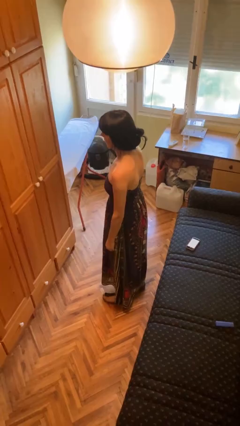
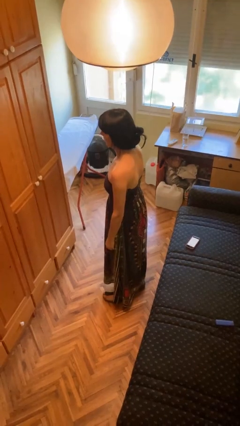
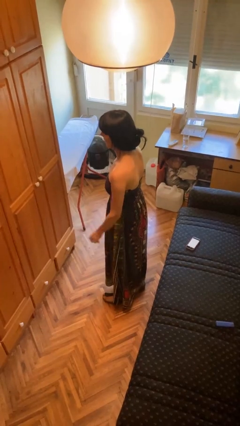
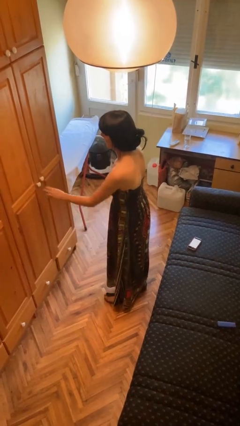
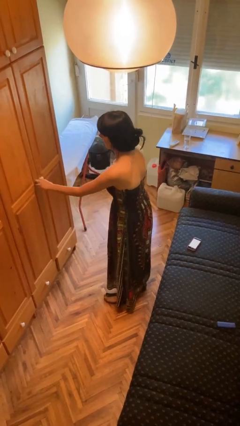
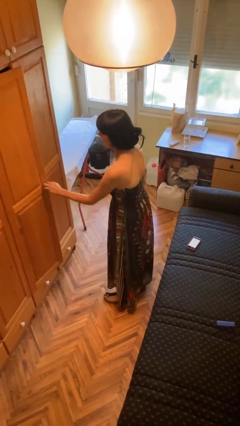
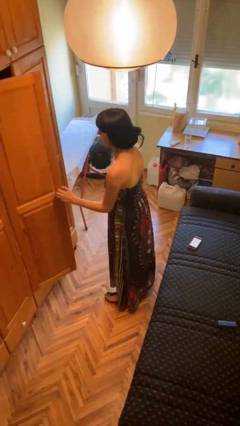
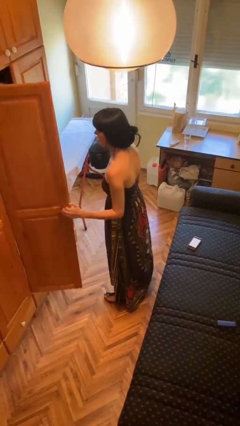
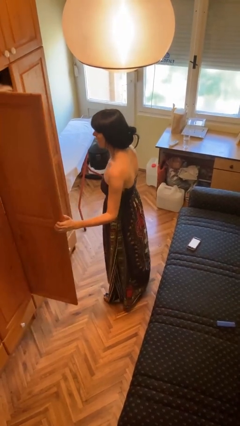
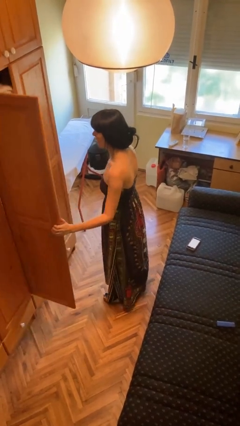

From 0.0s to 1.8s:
person opens closet door

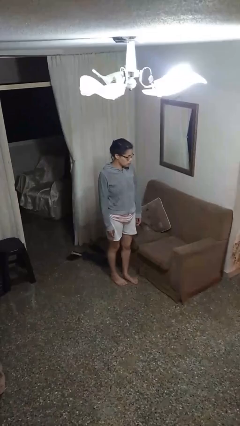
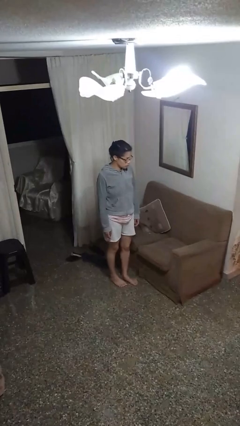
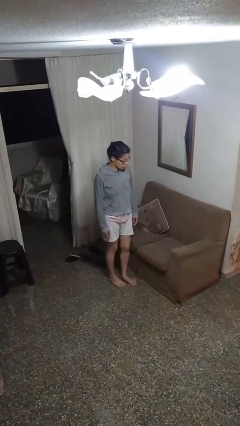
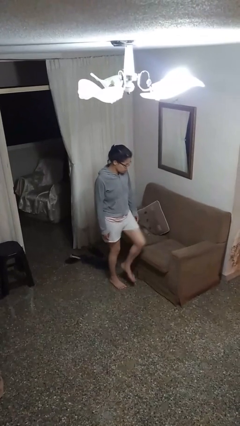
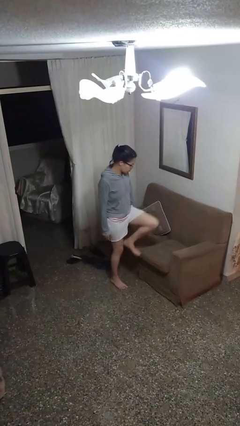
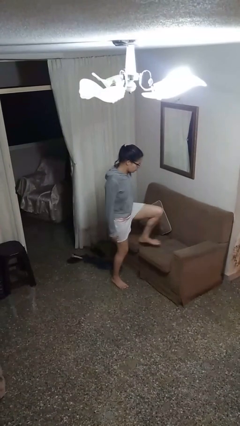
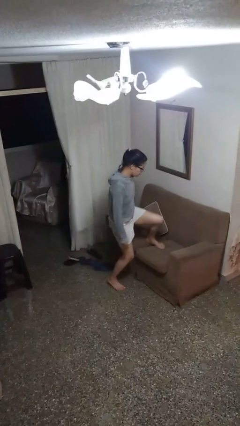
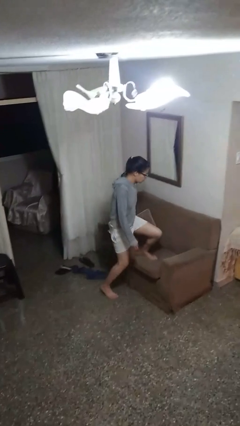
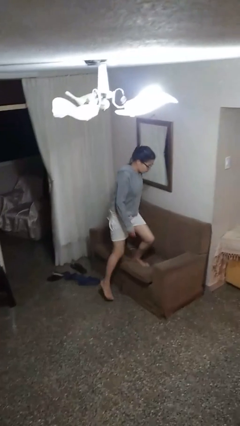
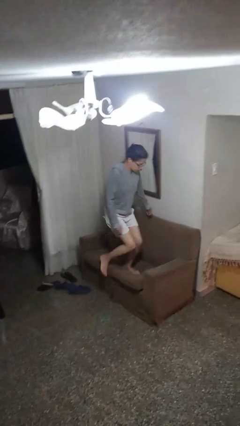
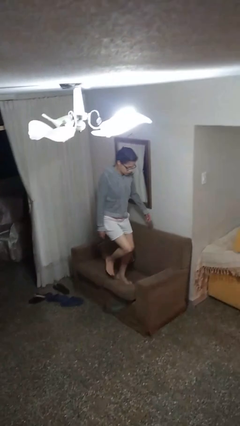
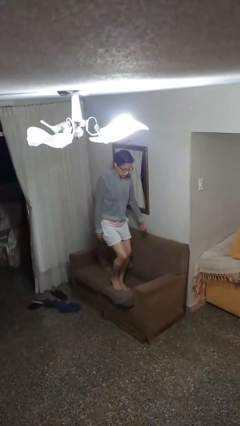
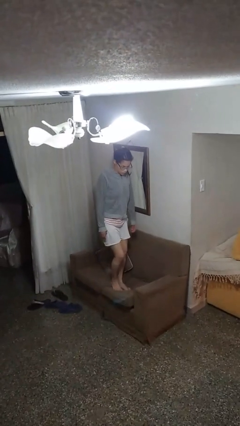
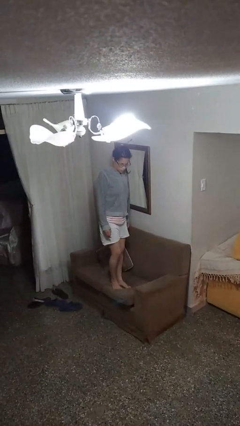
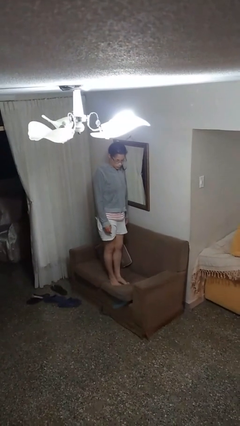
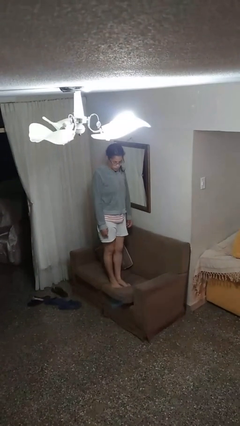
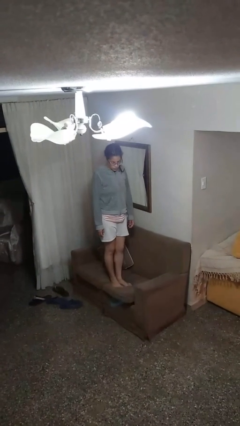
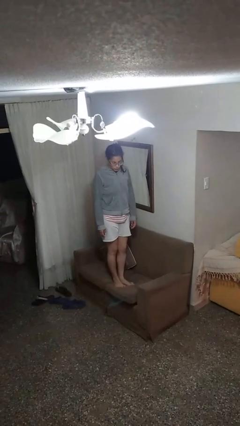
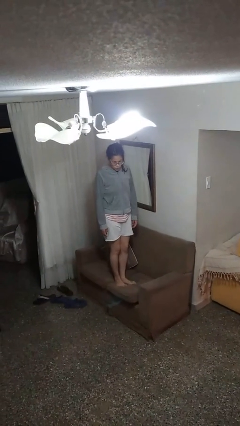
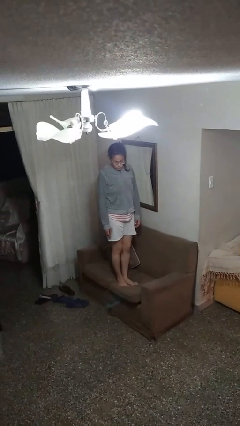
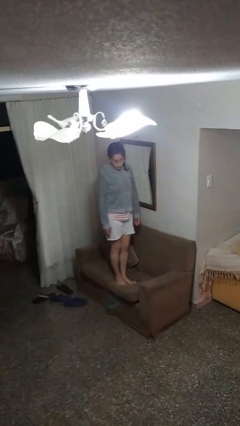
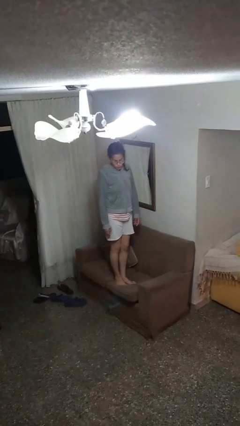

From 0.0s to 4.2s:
person climbs on couch

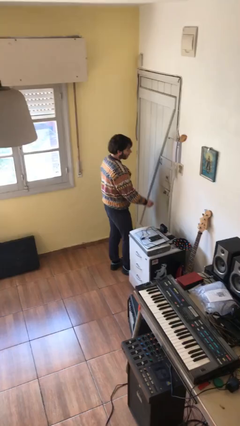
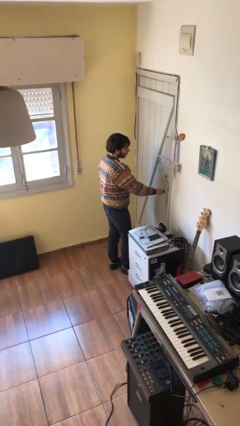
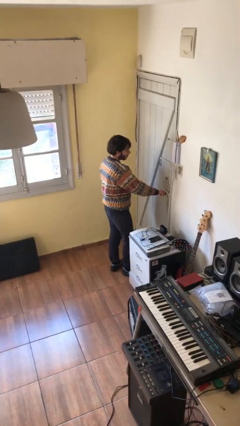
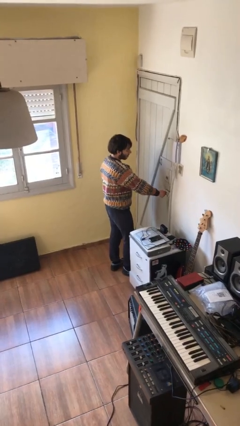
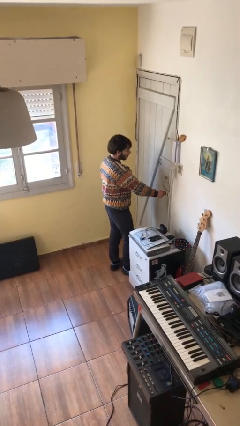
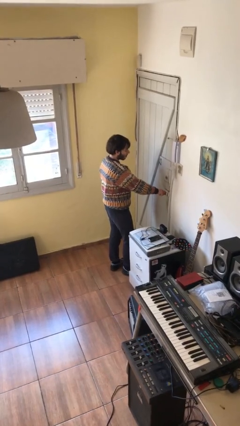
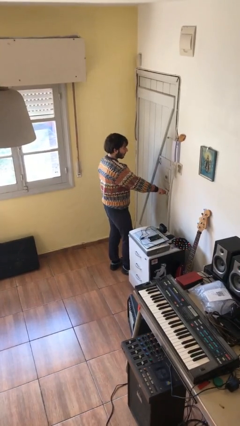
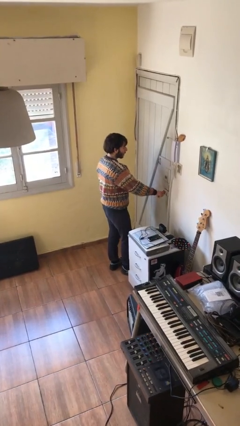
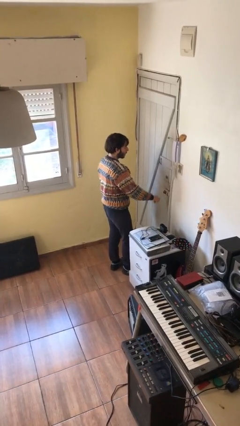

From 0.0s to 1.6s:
person locks door with keys

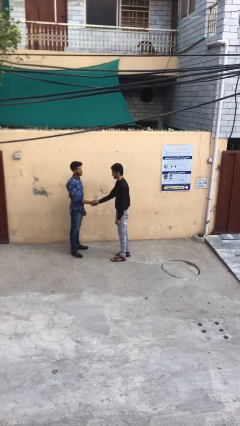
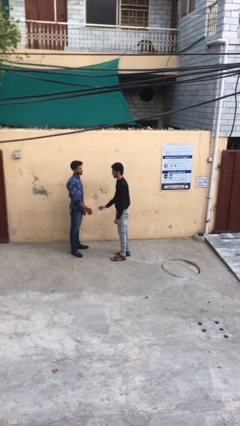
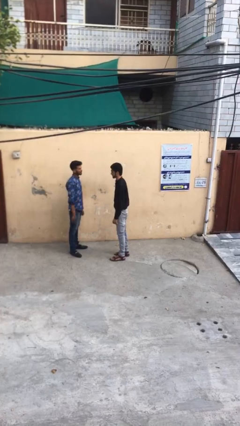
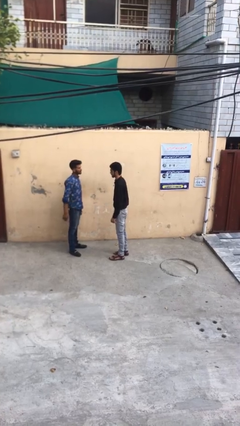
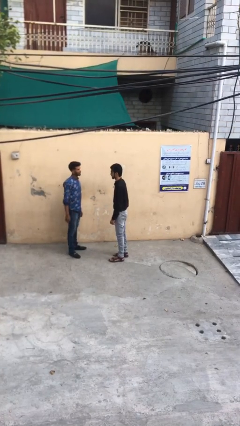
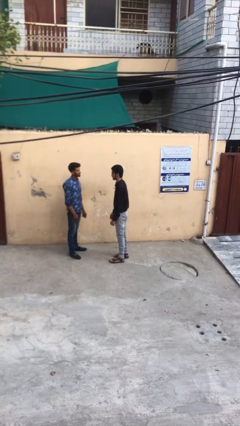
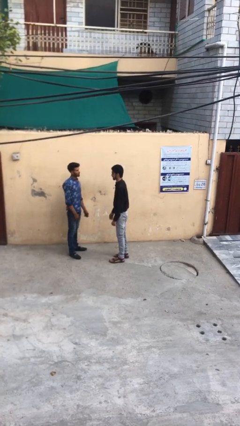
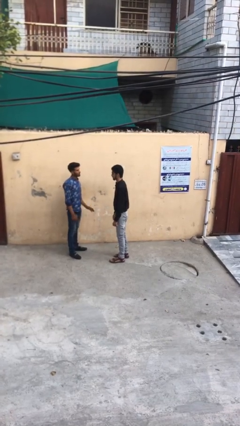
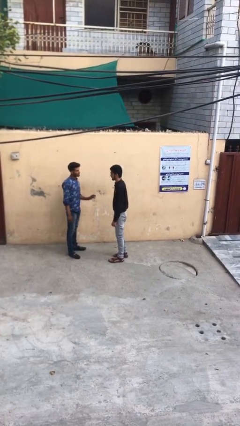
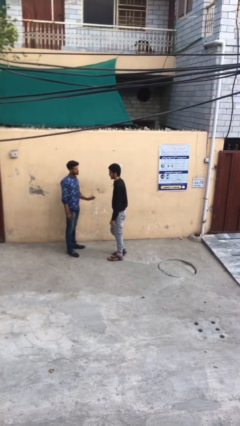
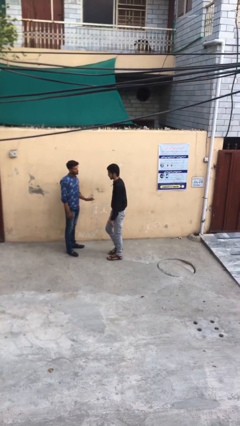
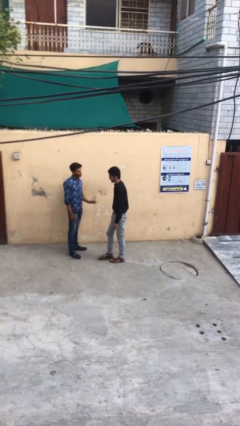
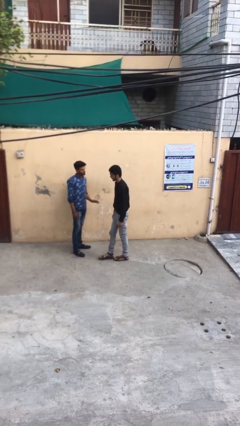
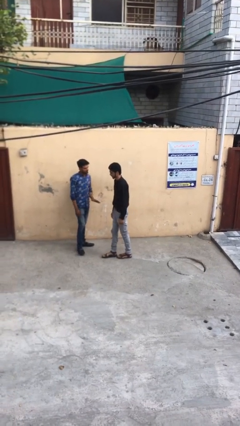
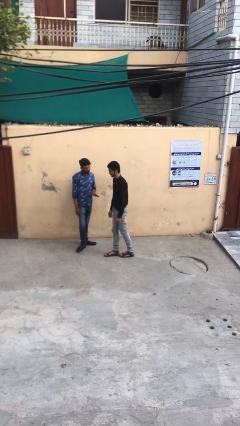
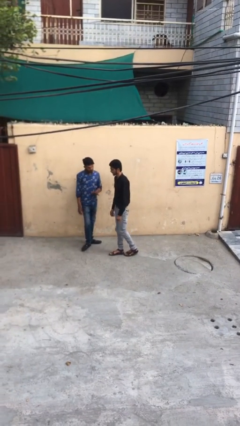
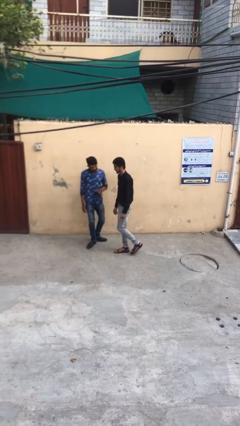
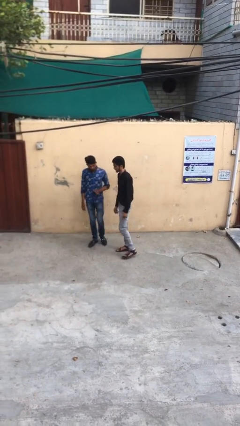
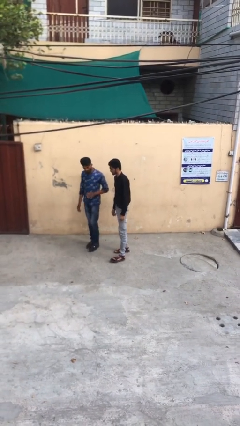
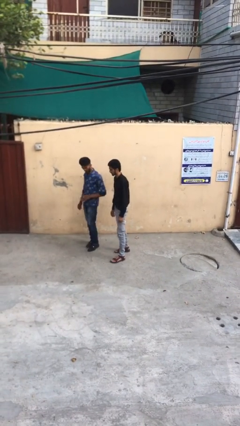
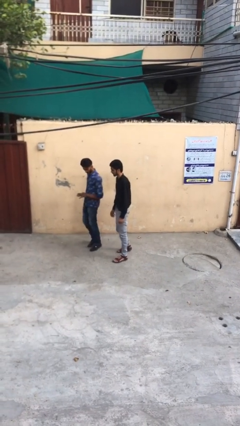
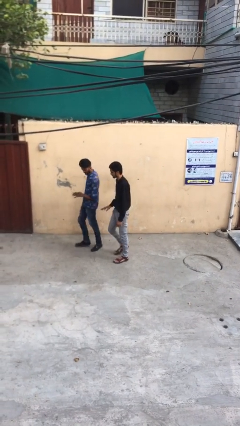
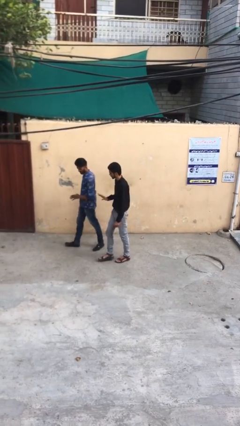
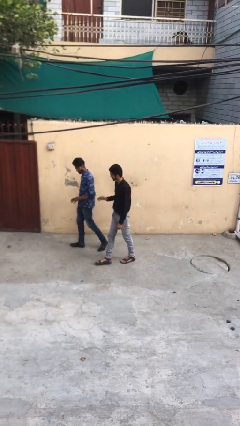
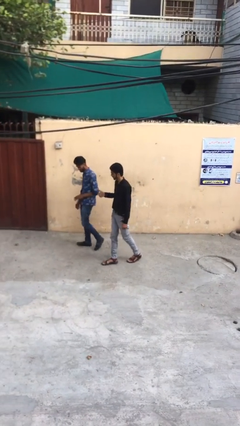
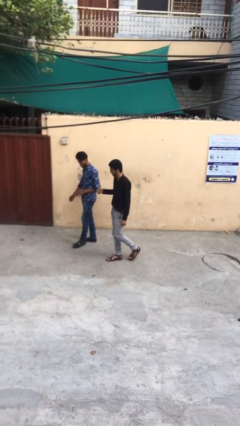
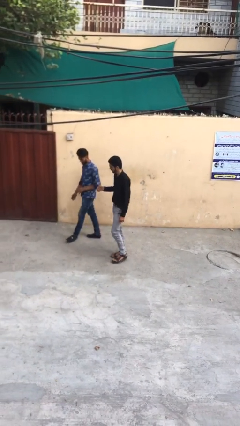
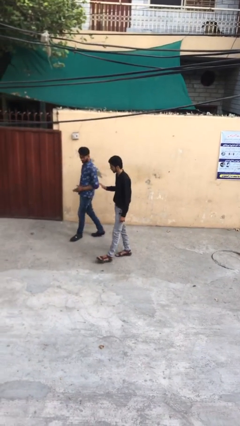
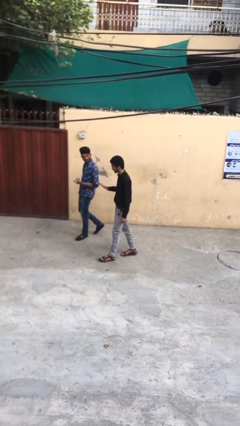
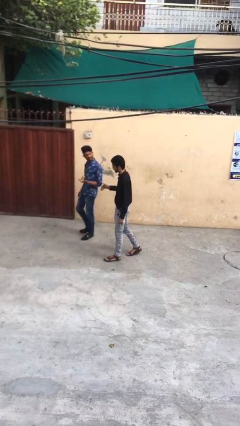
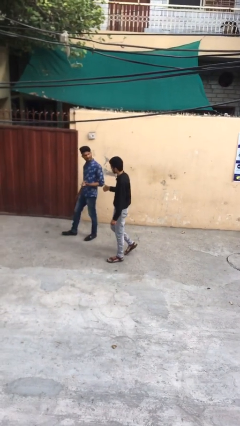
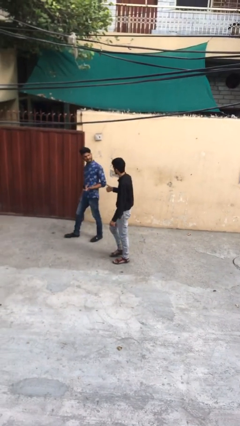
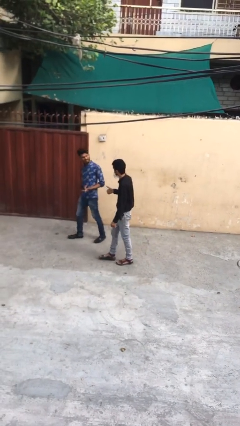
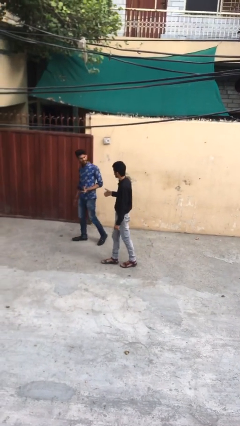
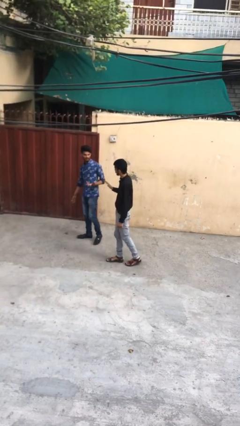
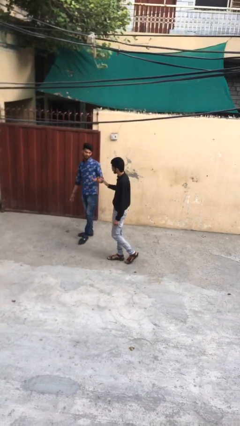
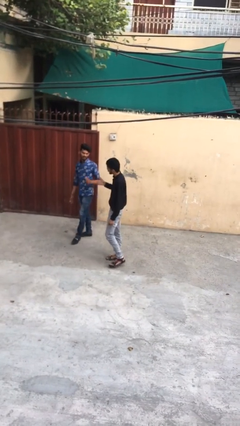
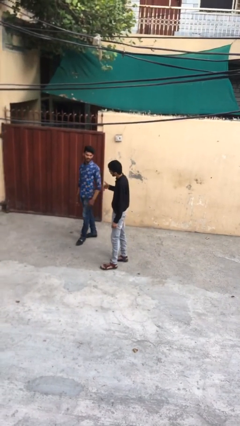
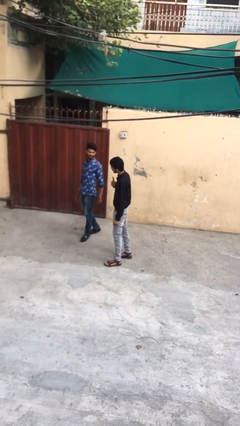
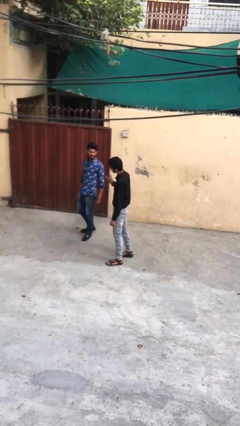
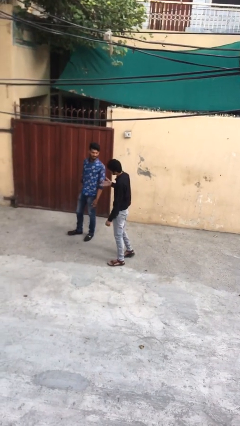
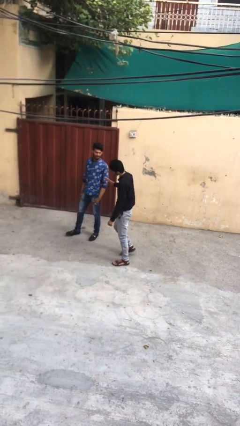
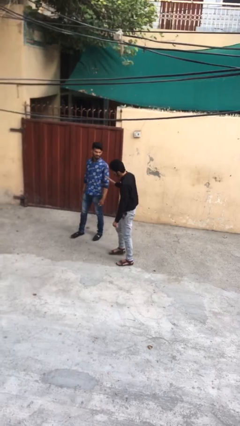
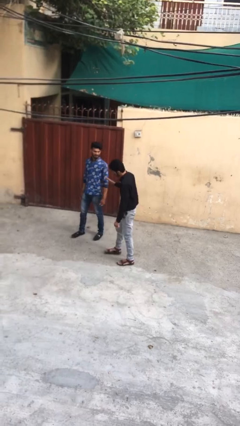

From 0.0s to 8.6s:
person talks to person

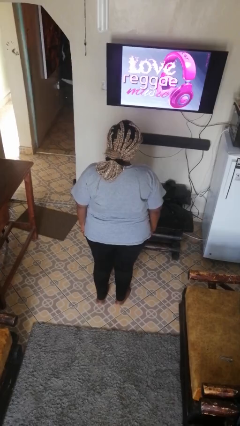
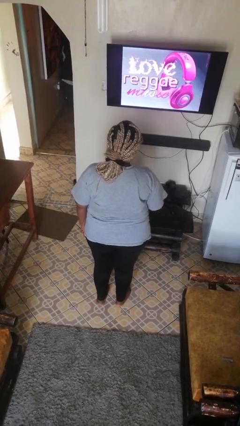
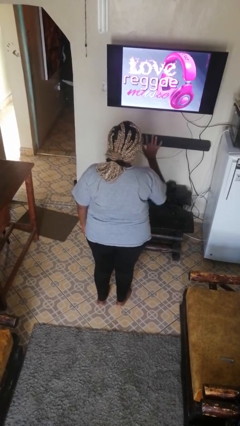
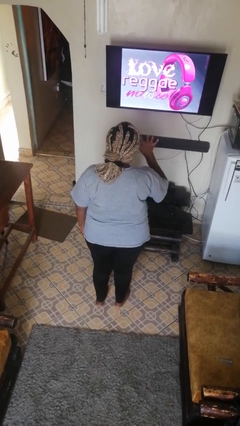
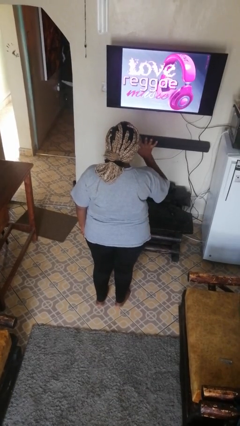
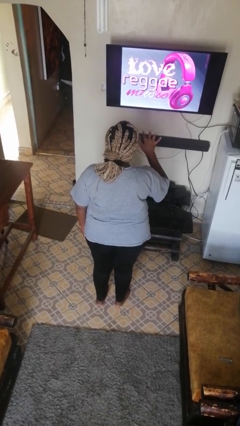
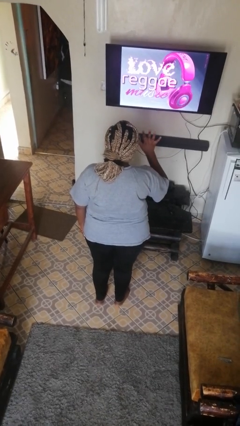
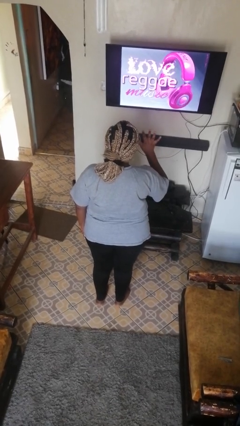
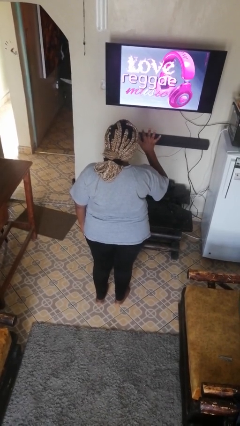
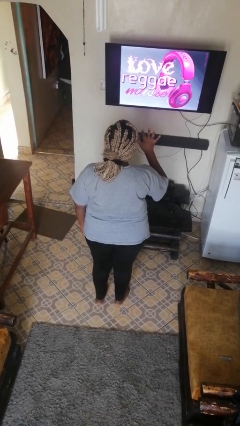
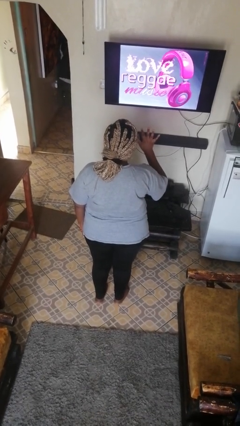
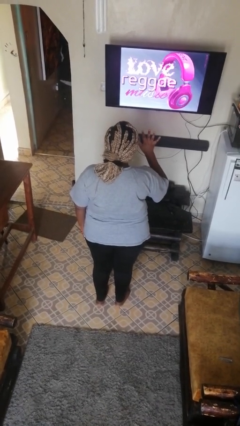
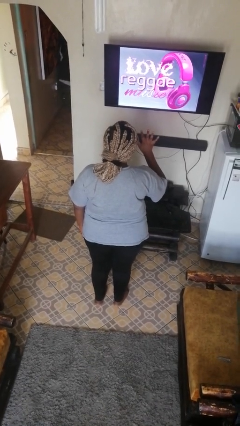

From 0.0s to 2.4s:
person gestures stop
